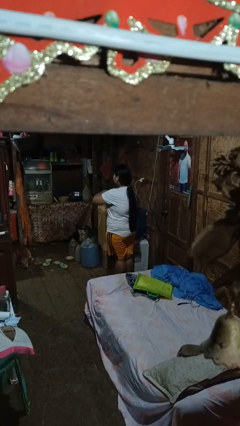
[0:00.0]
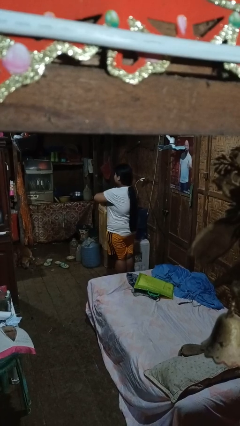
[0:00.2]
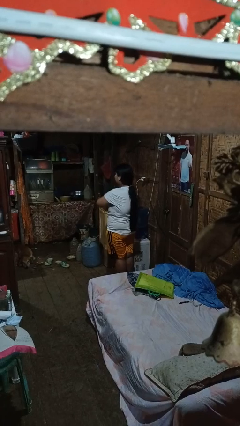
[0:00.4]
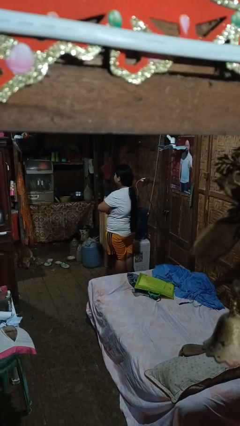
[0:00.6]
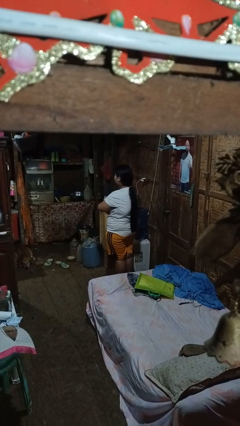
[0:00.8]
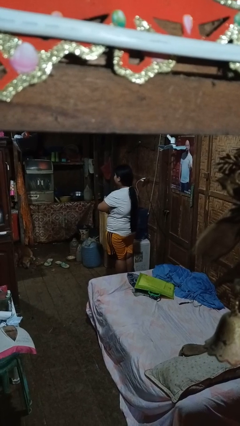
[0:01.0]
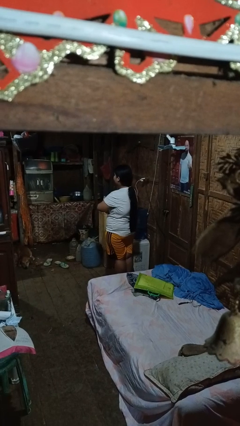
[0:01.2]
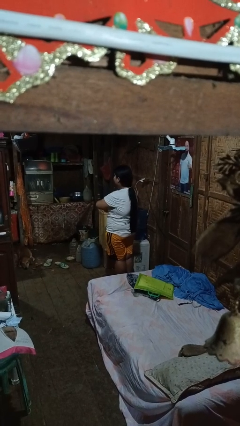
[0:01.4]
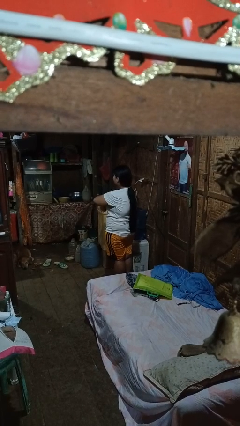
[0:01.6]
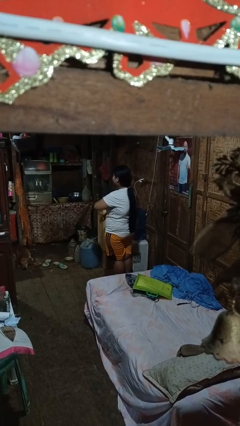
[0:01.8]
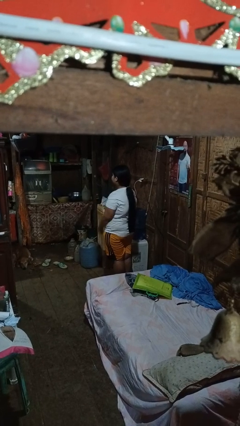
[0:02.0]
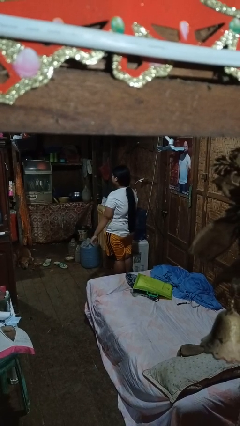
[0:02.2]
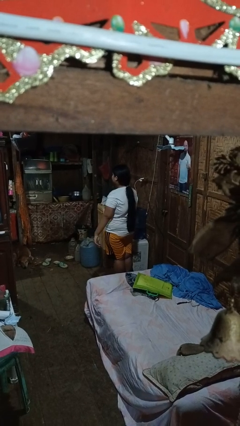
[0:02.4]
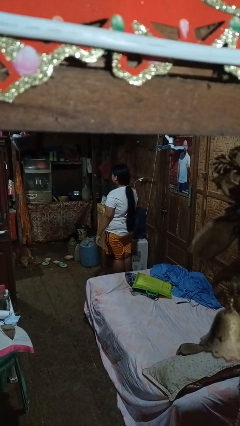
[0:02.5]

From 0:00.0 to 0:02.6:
person gestures arms x

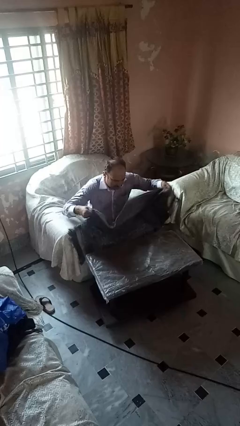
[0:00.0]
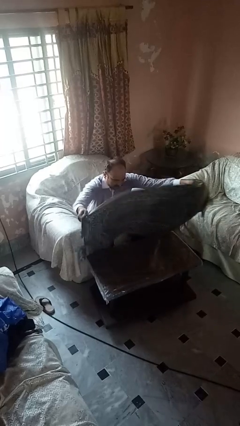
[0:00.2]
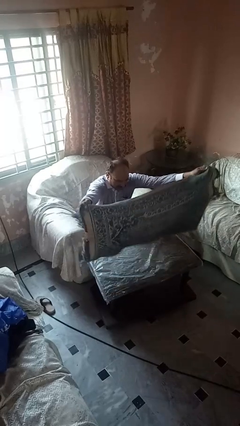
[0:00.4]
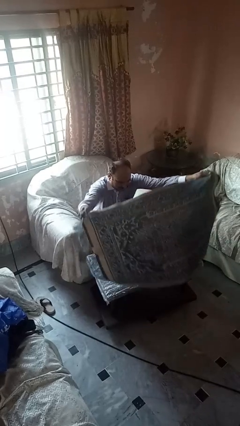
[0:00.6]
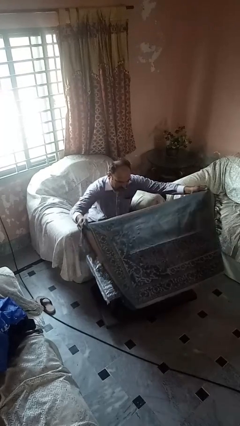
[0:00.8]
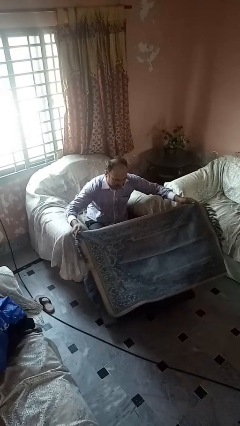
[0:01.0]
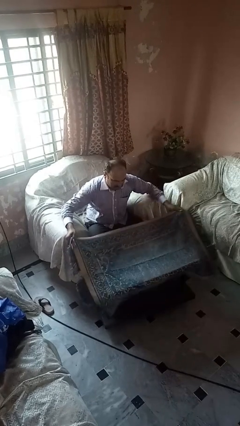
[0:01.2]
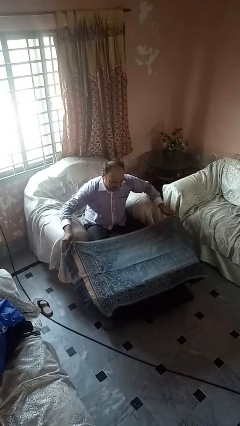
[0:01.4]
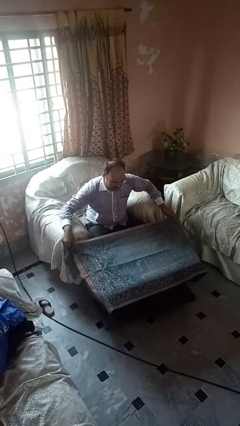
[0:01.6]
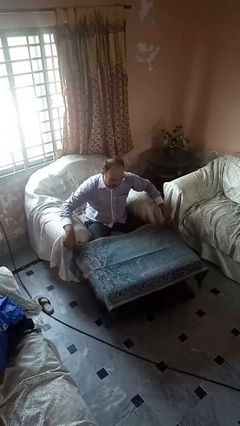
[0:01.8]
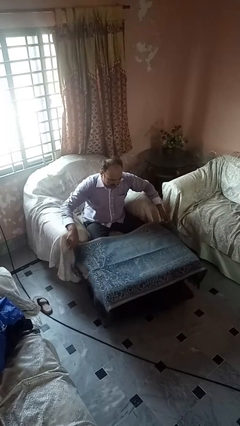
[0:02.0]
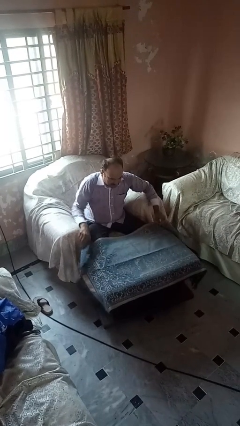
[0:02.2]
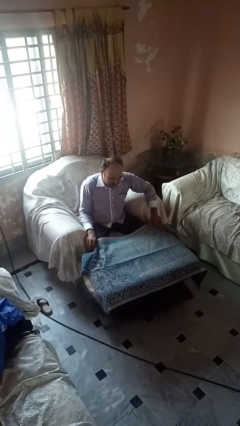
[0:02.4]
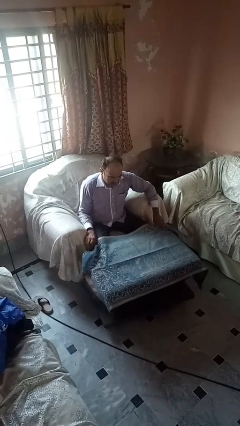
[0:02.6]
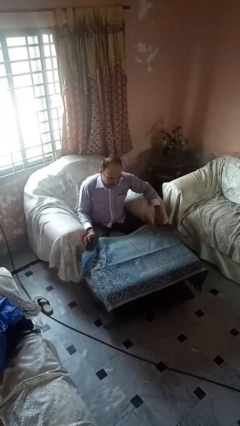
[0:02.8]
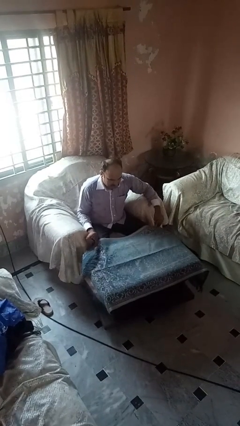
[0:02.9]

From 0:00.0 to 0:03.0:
person spreads tablecloth

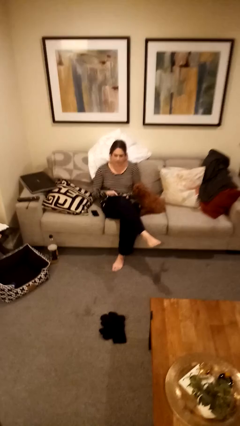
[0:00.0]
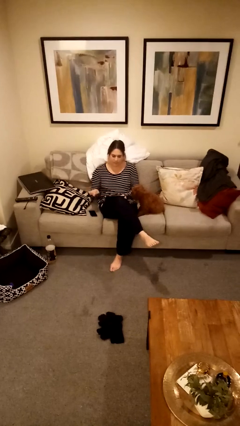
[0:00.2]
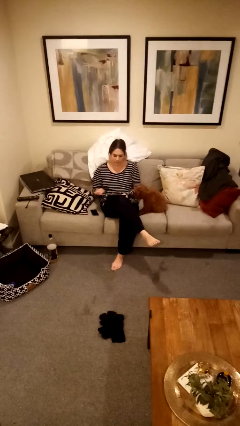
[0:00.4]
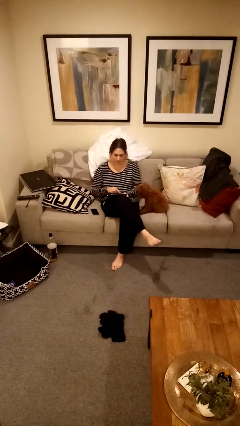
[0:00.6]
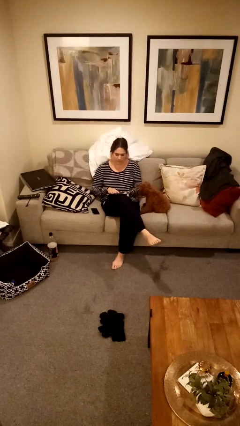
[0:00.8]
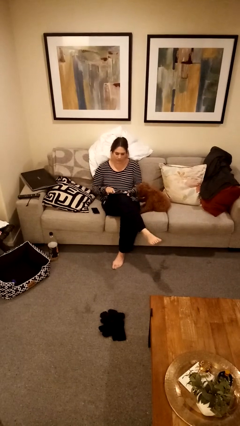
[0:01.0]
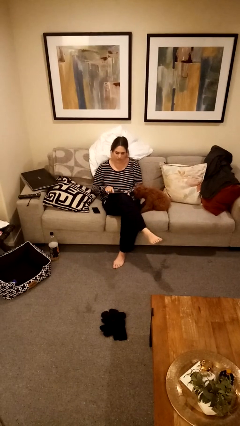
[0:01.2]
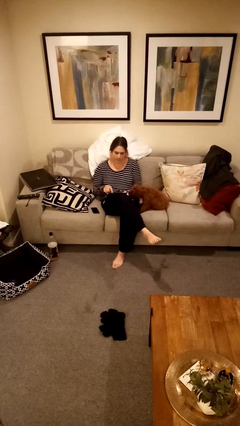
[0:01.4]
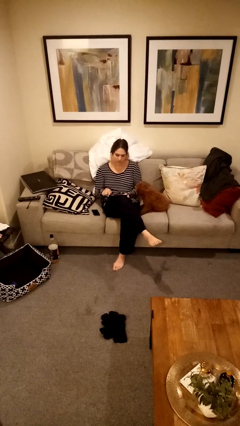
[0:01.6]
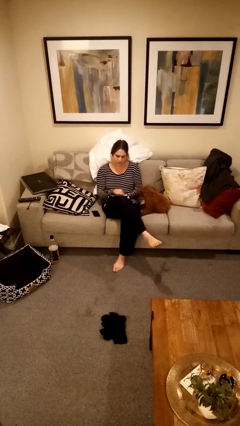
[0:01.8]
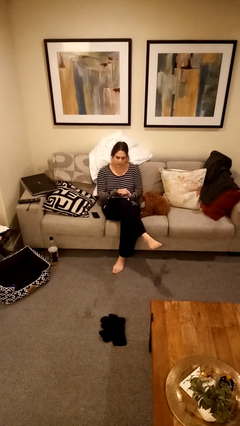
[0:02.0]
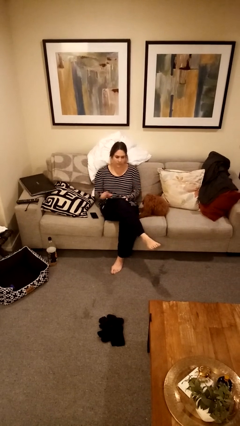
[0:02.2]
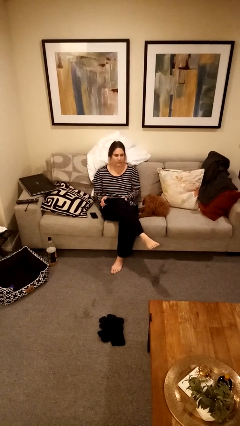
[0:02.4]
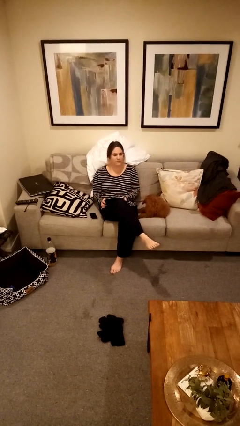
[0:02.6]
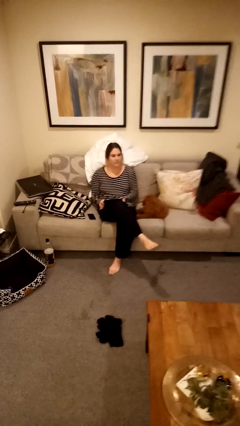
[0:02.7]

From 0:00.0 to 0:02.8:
person interacts with tablet

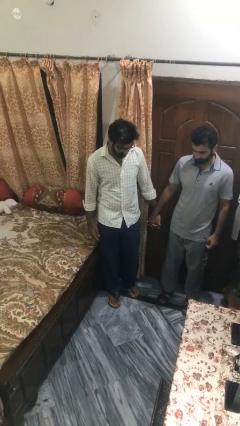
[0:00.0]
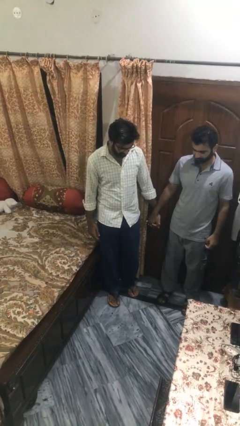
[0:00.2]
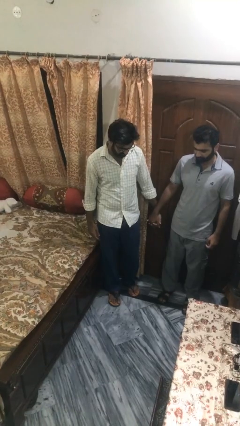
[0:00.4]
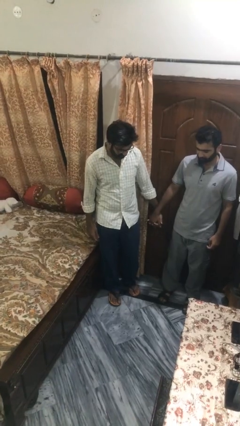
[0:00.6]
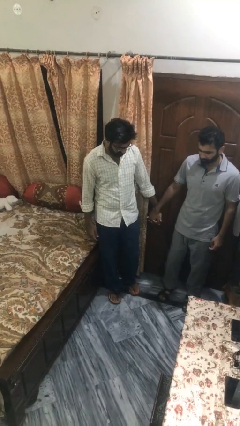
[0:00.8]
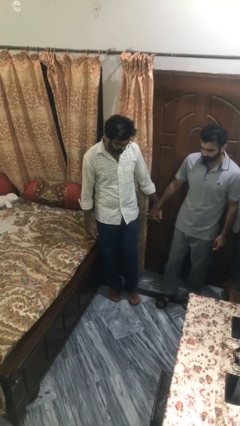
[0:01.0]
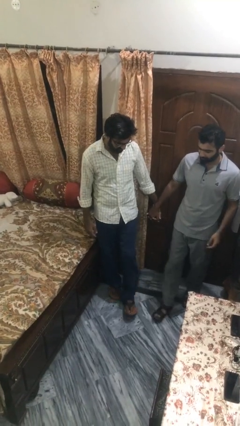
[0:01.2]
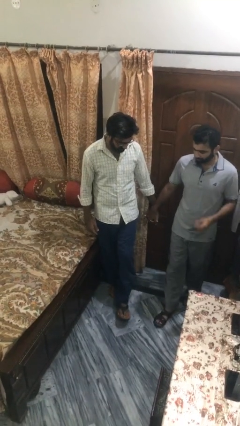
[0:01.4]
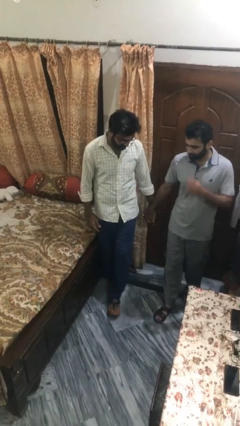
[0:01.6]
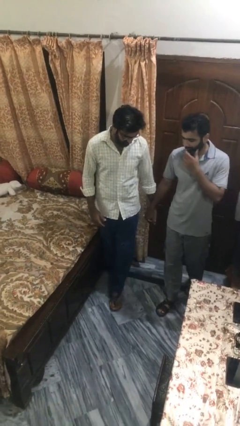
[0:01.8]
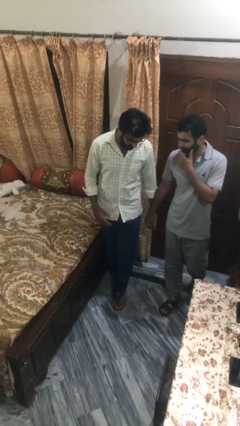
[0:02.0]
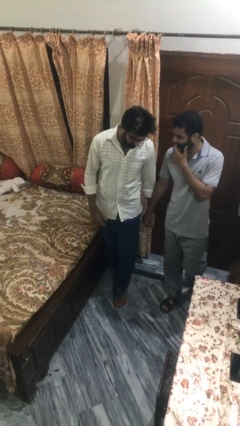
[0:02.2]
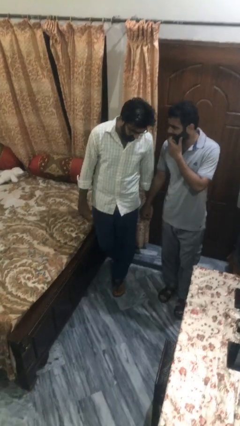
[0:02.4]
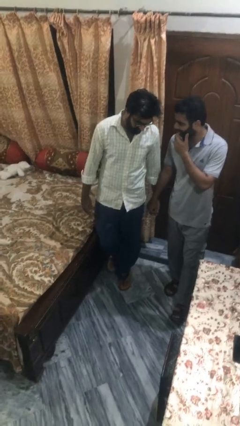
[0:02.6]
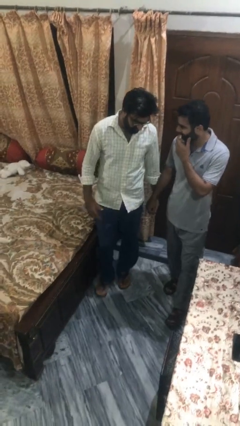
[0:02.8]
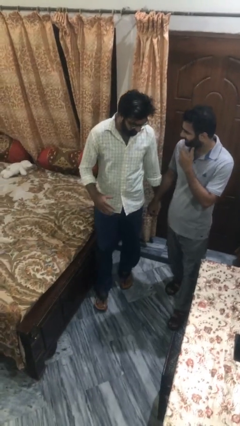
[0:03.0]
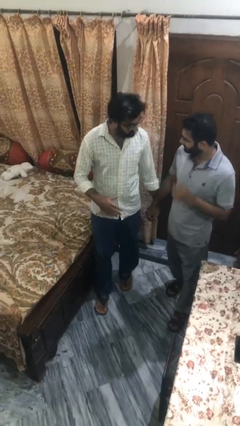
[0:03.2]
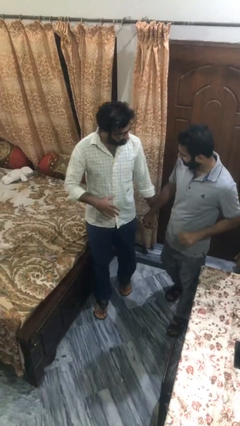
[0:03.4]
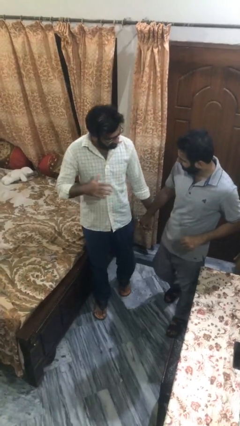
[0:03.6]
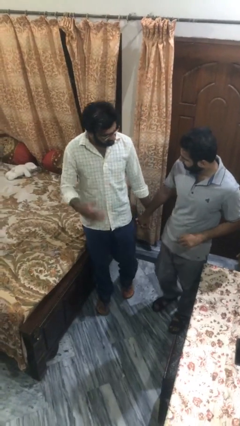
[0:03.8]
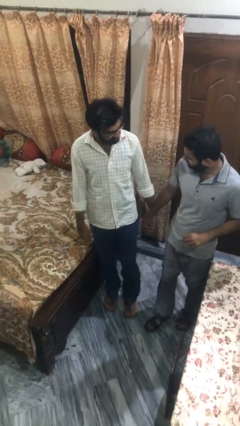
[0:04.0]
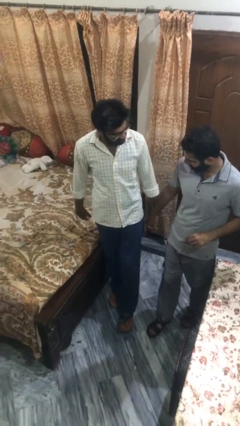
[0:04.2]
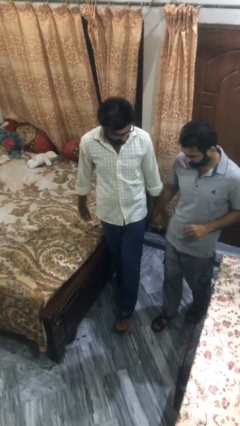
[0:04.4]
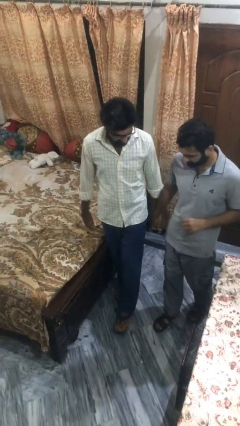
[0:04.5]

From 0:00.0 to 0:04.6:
person holds hand

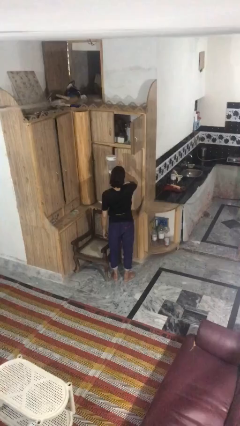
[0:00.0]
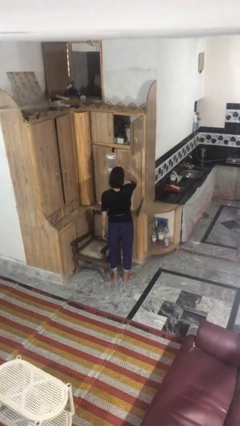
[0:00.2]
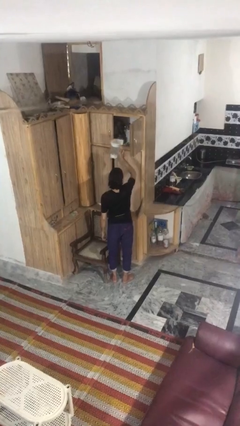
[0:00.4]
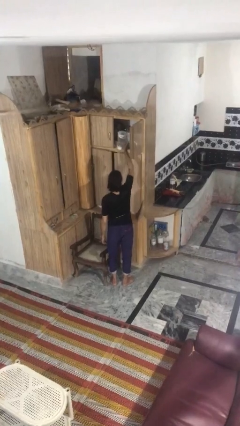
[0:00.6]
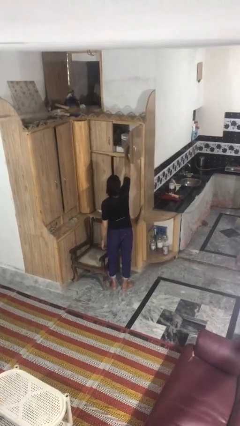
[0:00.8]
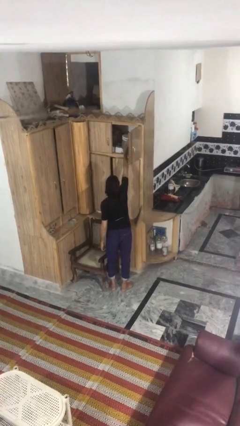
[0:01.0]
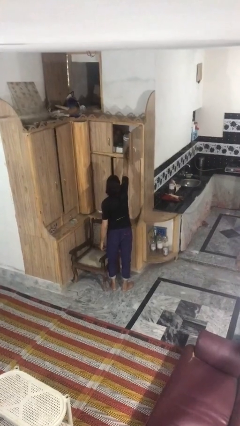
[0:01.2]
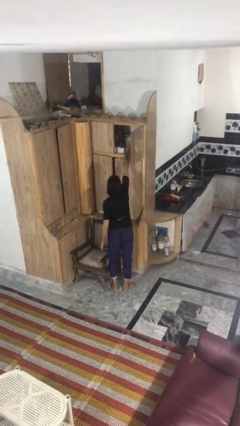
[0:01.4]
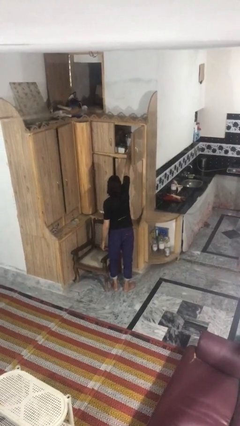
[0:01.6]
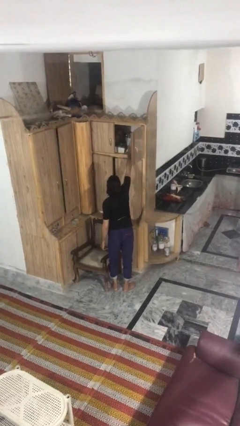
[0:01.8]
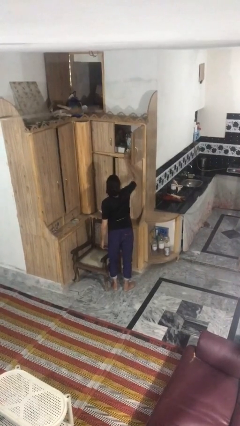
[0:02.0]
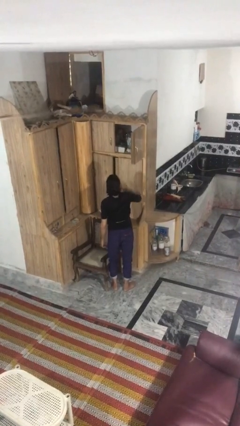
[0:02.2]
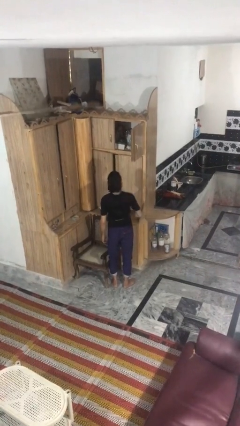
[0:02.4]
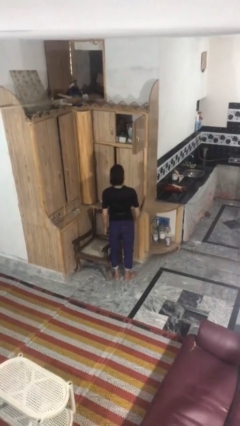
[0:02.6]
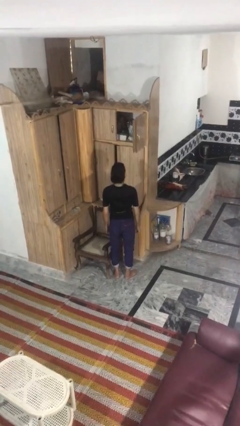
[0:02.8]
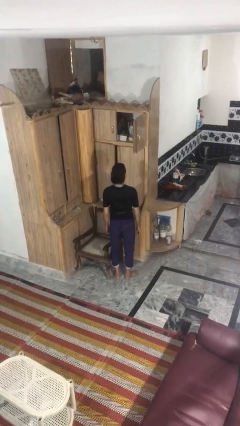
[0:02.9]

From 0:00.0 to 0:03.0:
person puts down object on shelf

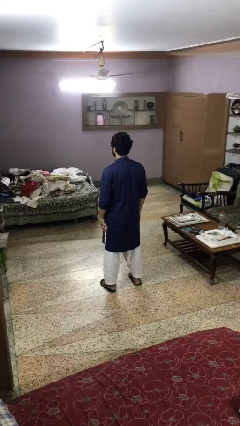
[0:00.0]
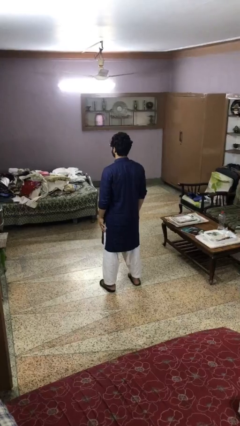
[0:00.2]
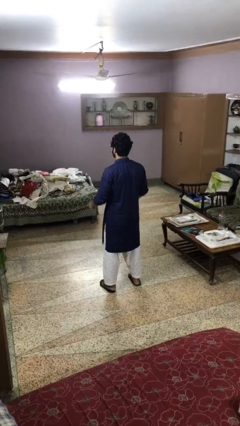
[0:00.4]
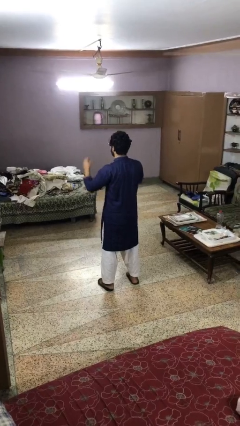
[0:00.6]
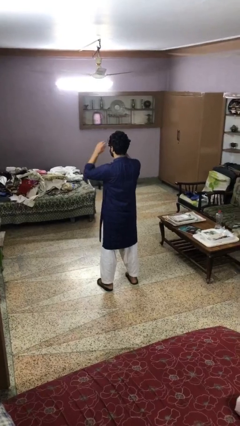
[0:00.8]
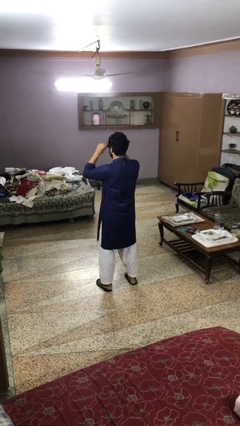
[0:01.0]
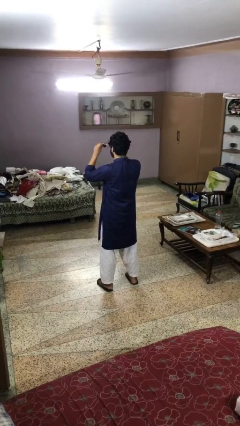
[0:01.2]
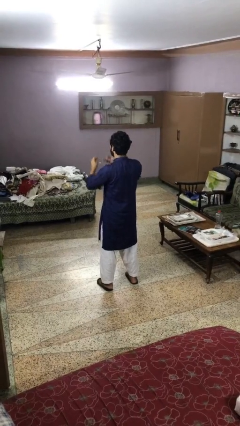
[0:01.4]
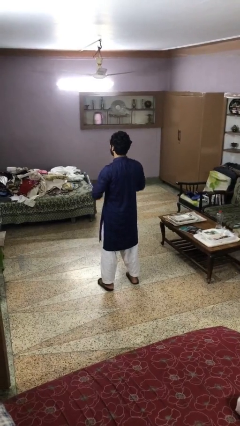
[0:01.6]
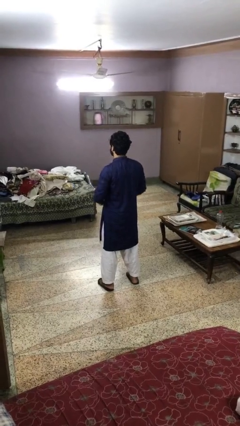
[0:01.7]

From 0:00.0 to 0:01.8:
person takes off sunglasses
